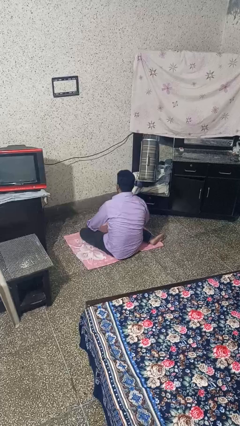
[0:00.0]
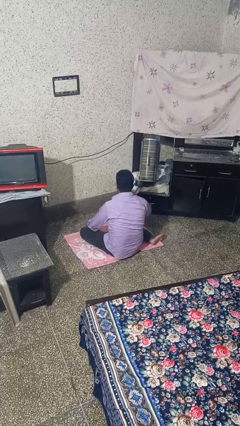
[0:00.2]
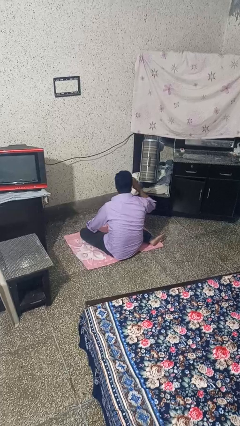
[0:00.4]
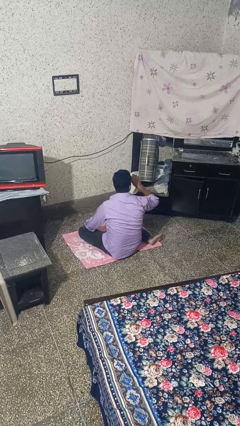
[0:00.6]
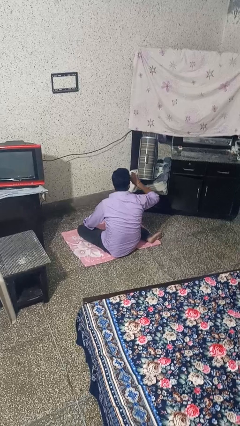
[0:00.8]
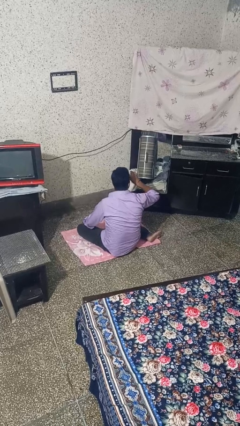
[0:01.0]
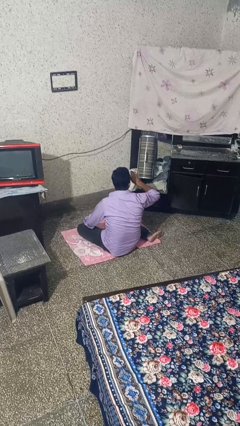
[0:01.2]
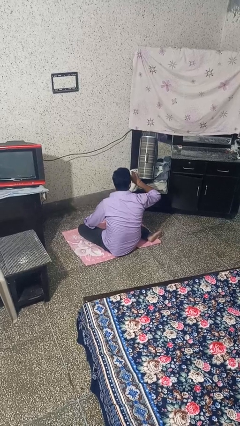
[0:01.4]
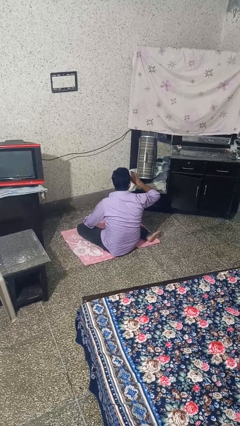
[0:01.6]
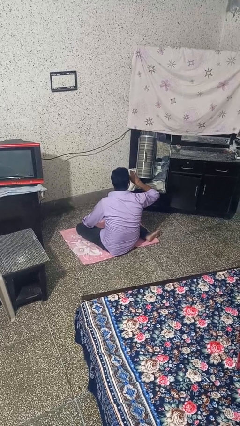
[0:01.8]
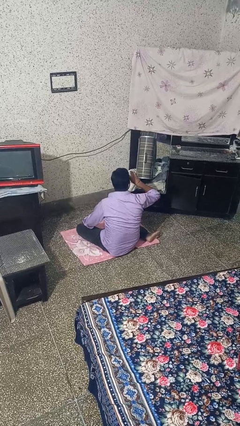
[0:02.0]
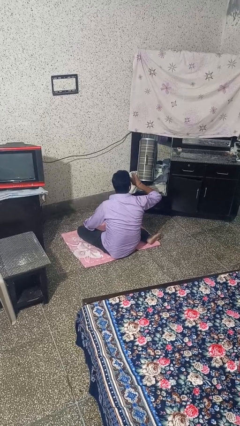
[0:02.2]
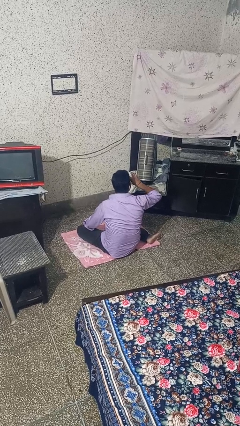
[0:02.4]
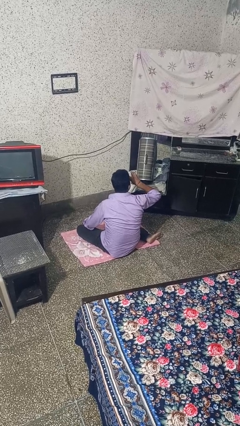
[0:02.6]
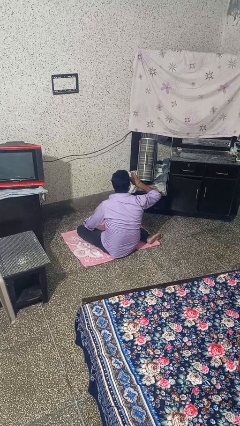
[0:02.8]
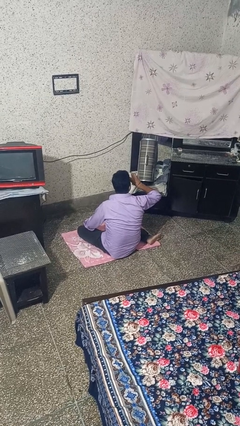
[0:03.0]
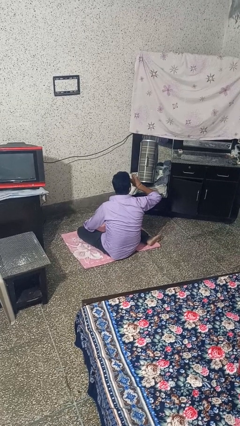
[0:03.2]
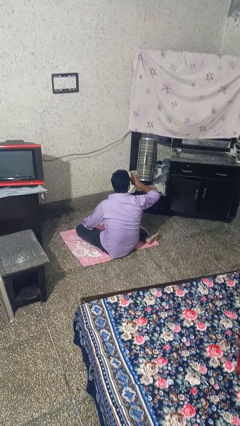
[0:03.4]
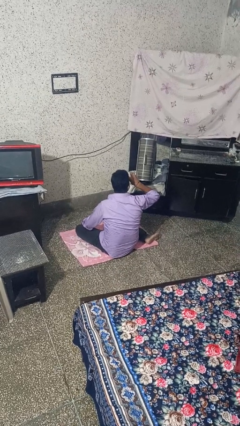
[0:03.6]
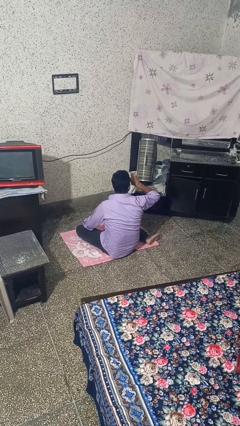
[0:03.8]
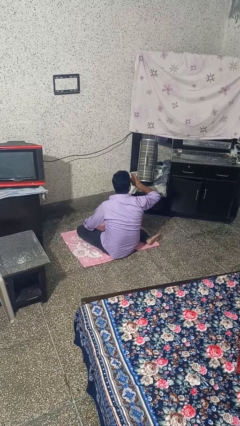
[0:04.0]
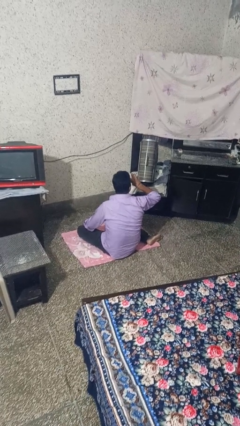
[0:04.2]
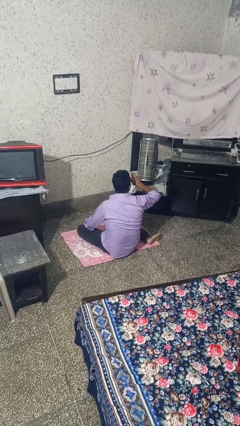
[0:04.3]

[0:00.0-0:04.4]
person vapes

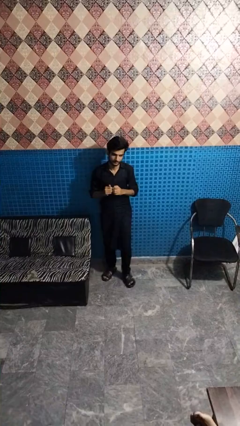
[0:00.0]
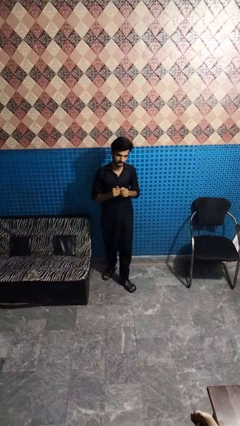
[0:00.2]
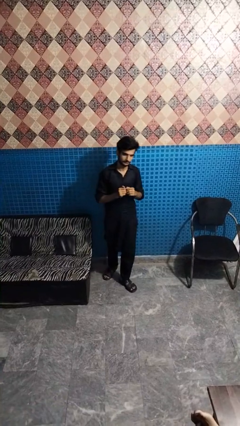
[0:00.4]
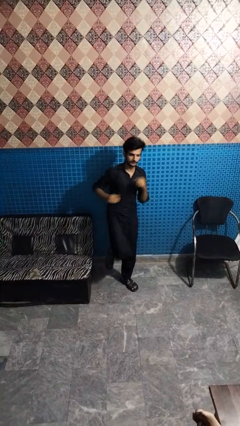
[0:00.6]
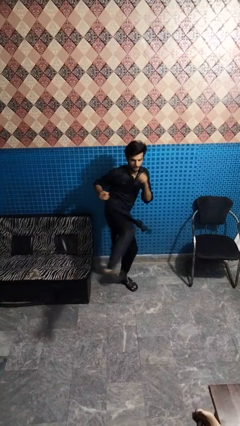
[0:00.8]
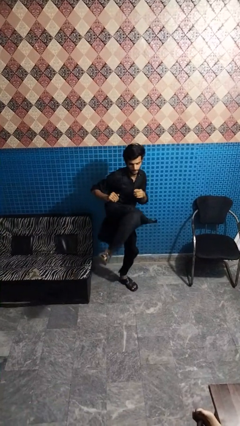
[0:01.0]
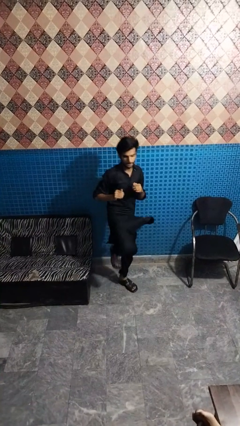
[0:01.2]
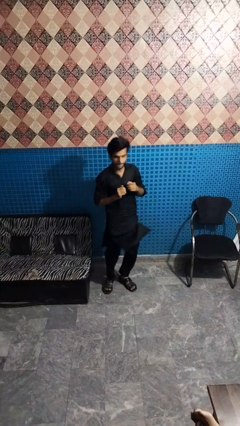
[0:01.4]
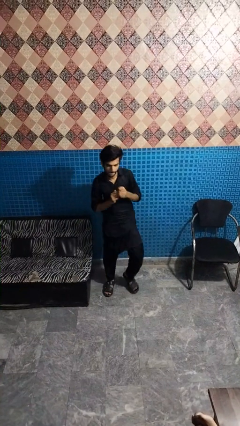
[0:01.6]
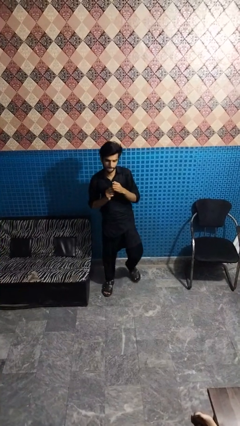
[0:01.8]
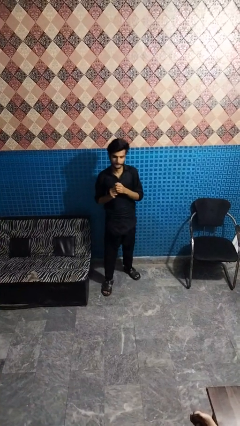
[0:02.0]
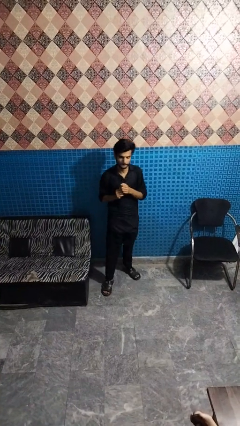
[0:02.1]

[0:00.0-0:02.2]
person karate kicks

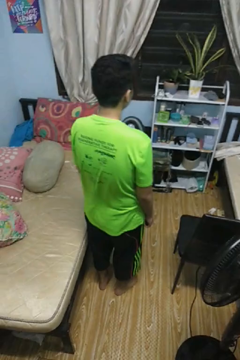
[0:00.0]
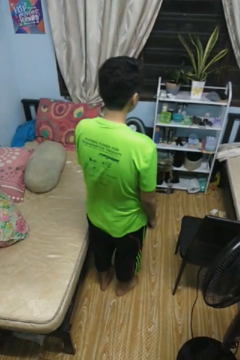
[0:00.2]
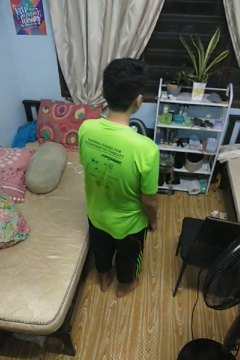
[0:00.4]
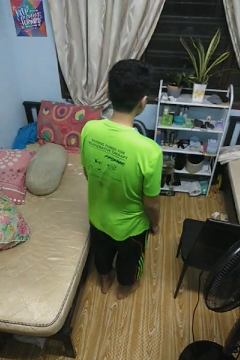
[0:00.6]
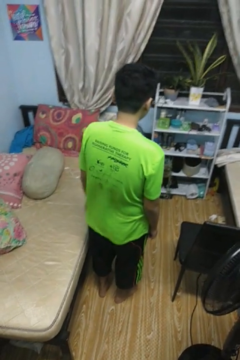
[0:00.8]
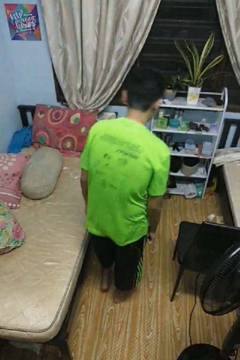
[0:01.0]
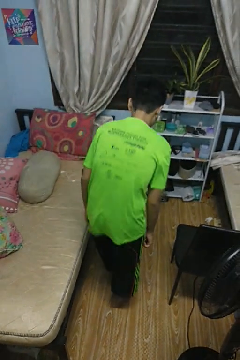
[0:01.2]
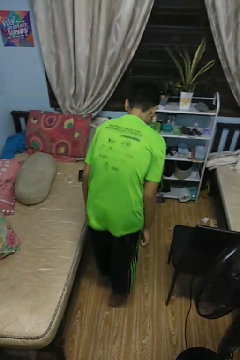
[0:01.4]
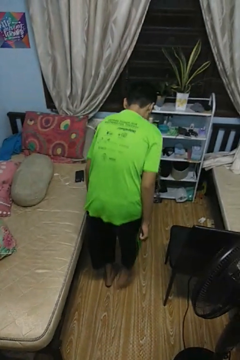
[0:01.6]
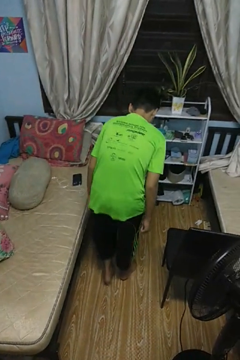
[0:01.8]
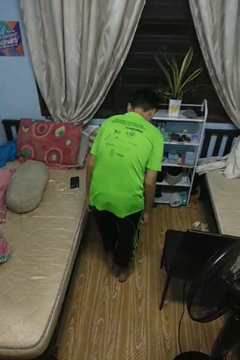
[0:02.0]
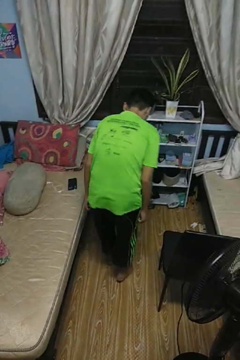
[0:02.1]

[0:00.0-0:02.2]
person walks tiptoe

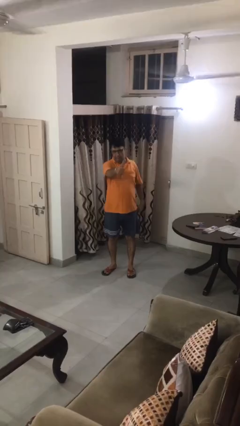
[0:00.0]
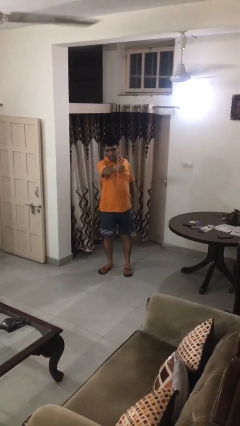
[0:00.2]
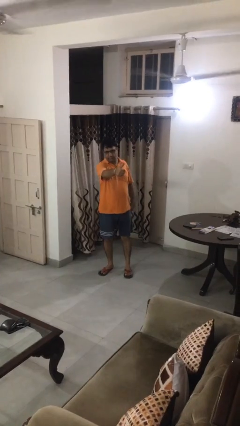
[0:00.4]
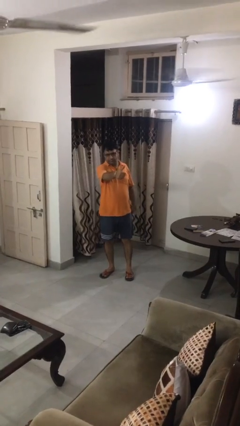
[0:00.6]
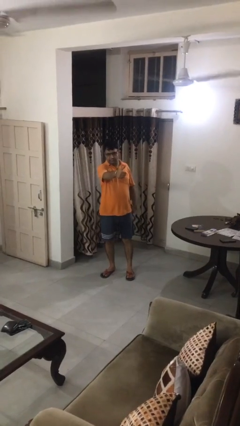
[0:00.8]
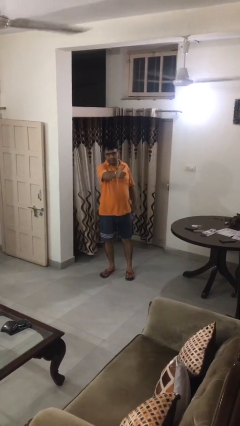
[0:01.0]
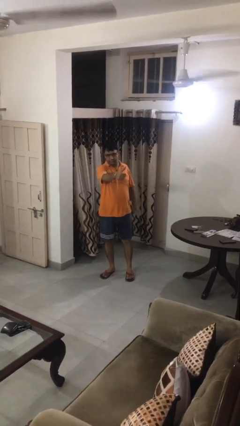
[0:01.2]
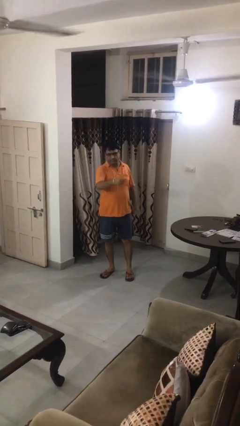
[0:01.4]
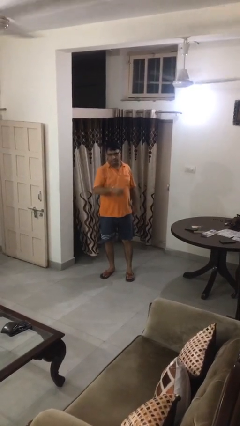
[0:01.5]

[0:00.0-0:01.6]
person gestures thumbs up

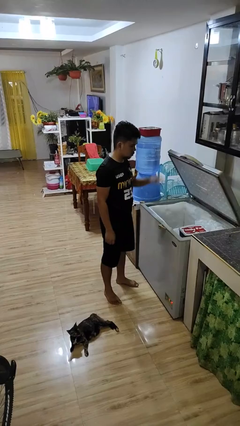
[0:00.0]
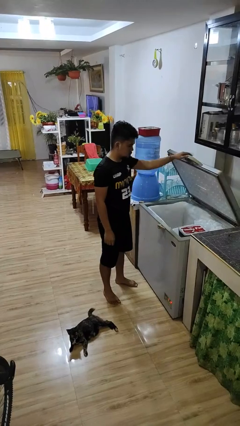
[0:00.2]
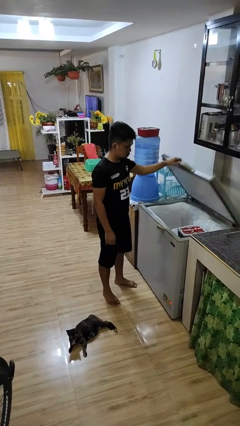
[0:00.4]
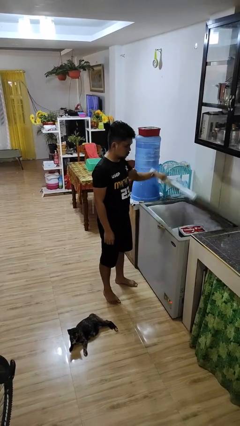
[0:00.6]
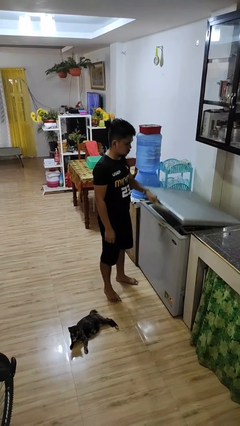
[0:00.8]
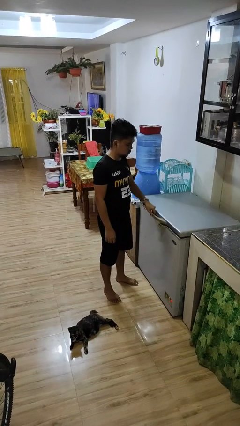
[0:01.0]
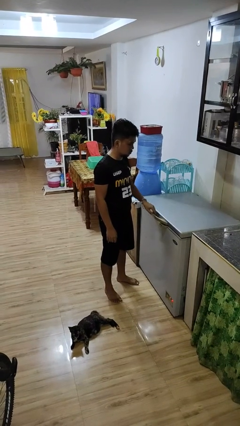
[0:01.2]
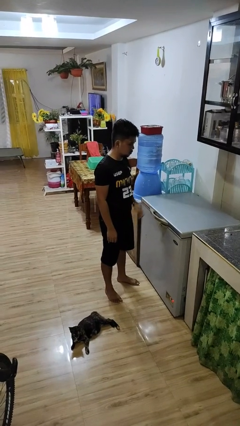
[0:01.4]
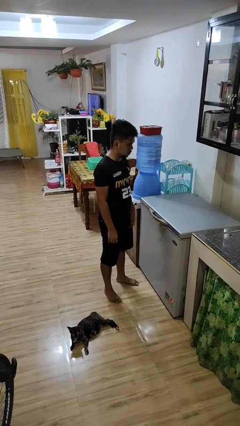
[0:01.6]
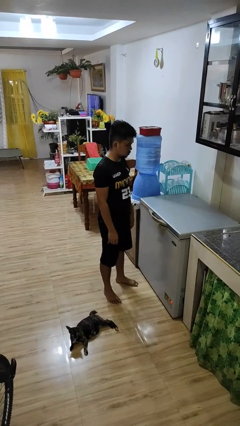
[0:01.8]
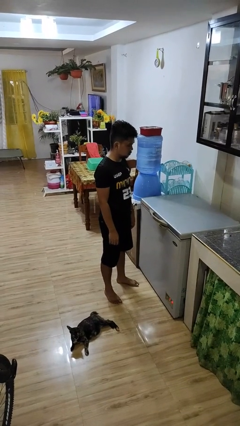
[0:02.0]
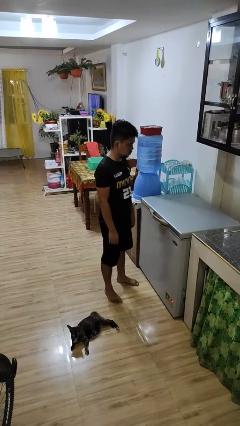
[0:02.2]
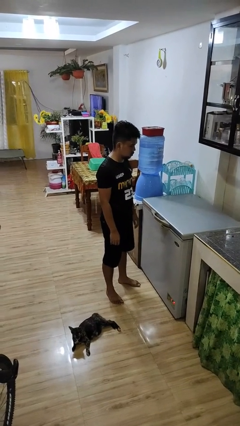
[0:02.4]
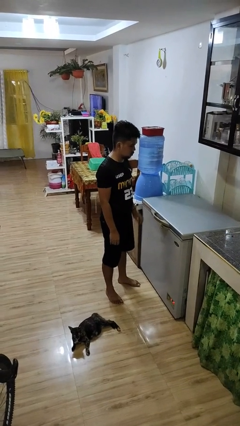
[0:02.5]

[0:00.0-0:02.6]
person closes refrigerator

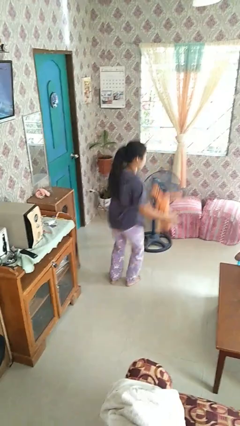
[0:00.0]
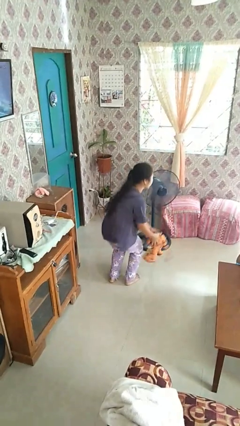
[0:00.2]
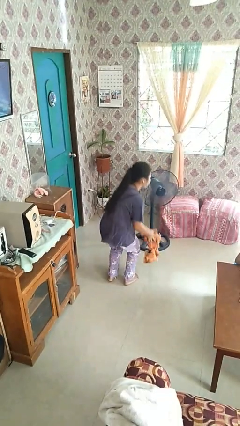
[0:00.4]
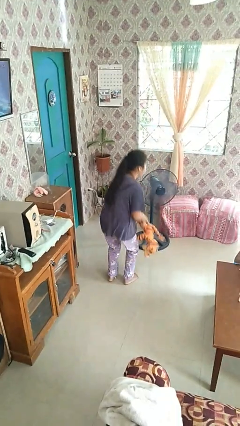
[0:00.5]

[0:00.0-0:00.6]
person catches dropped object

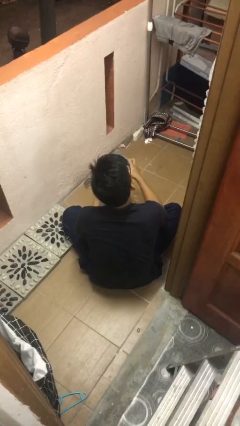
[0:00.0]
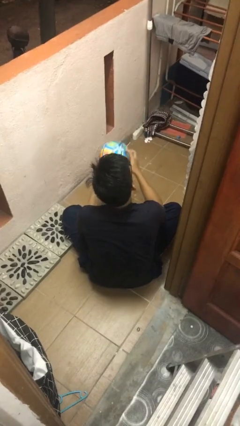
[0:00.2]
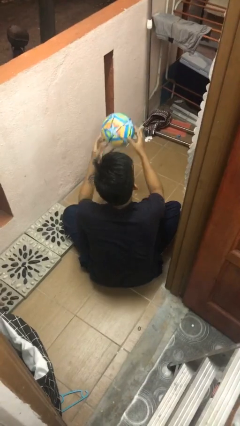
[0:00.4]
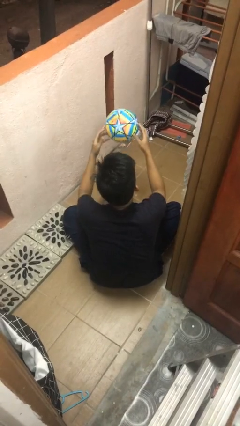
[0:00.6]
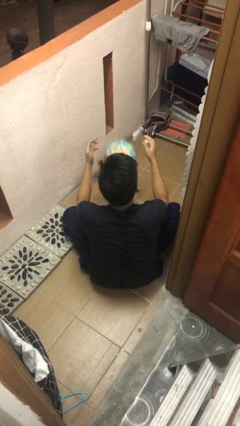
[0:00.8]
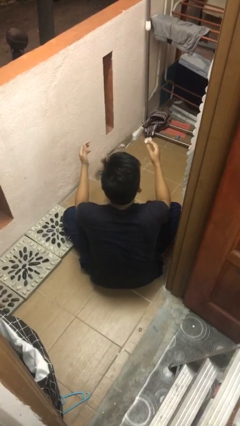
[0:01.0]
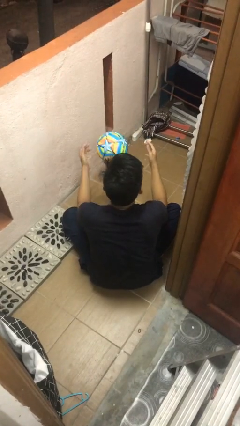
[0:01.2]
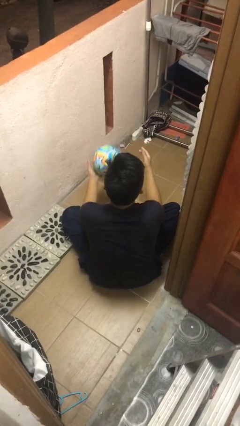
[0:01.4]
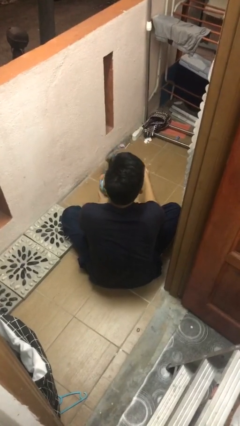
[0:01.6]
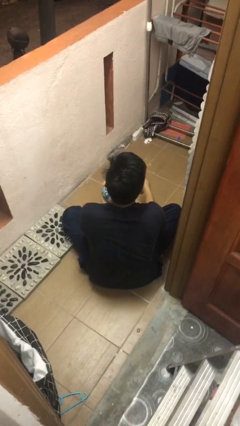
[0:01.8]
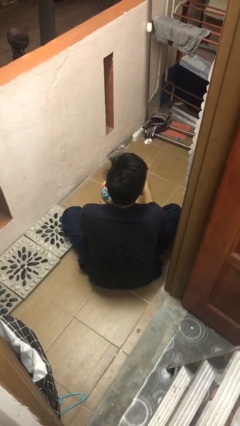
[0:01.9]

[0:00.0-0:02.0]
person bounces ball on floor

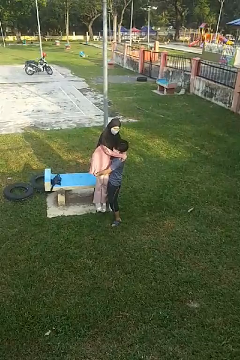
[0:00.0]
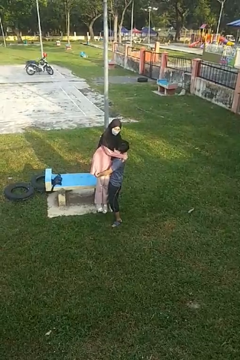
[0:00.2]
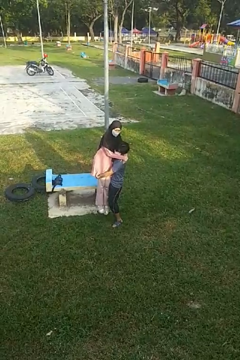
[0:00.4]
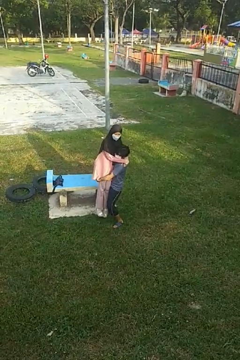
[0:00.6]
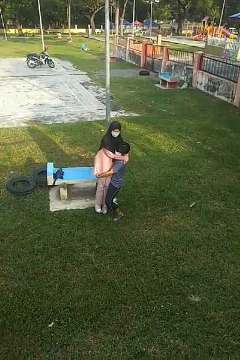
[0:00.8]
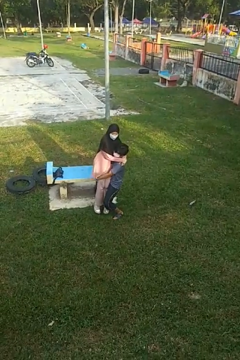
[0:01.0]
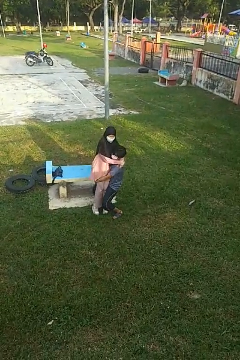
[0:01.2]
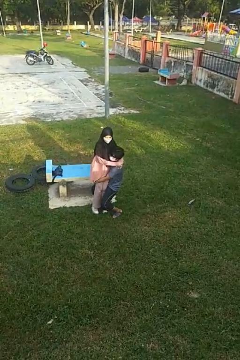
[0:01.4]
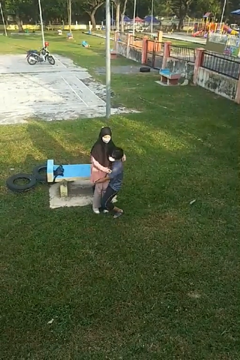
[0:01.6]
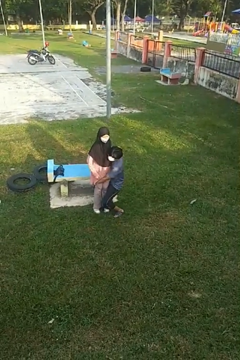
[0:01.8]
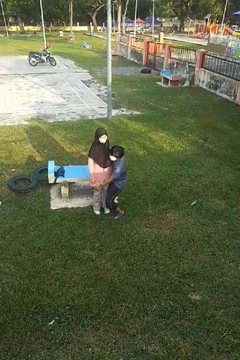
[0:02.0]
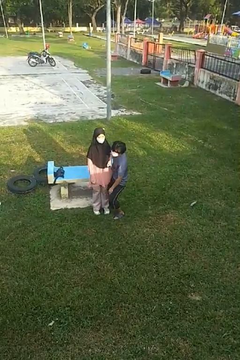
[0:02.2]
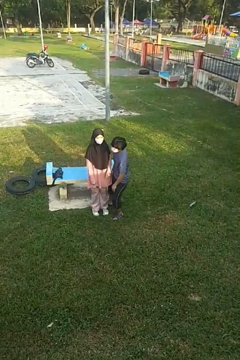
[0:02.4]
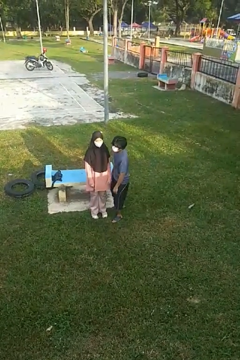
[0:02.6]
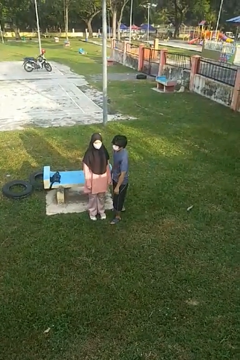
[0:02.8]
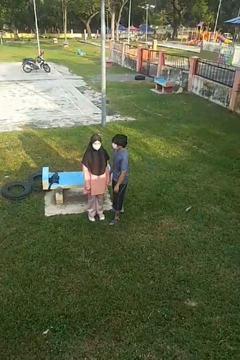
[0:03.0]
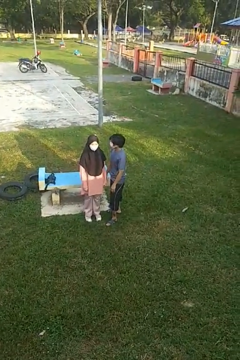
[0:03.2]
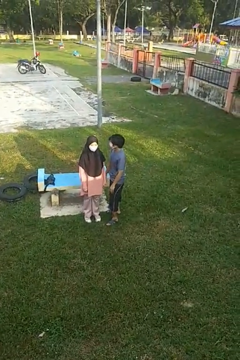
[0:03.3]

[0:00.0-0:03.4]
person puts down person
